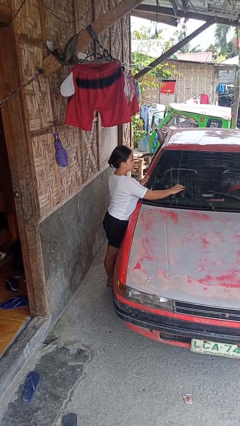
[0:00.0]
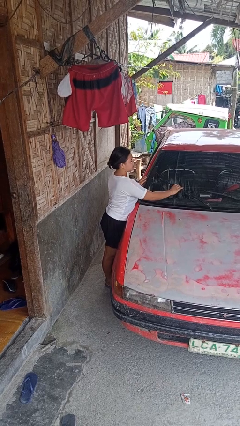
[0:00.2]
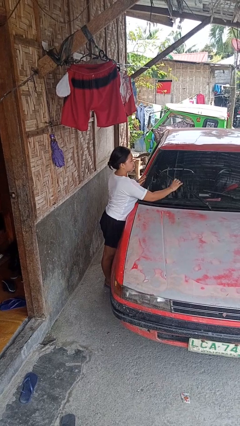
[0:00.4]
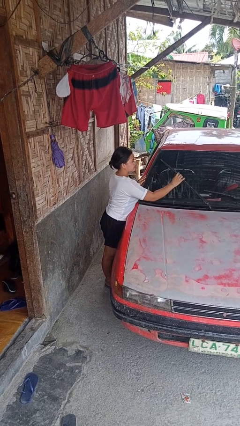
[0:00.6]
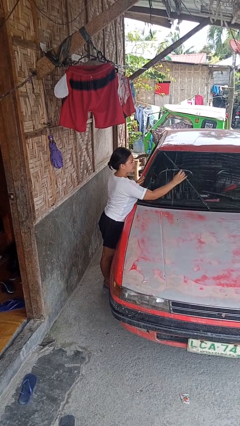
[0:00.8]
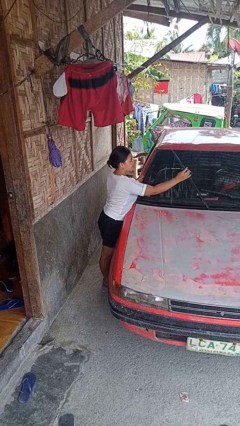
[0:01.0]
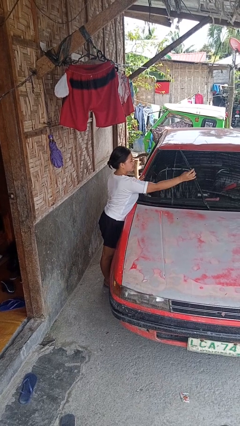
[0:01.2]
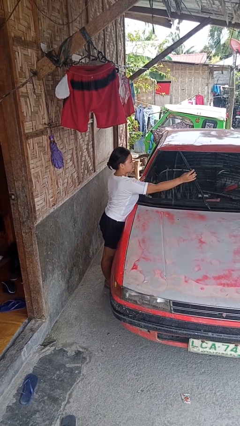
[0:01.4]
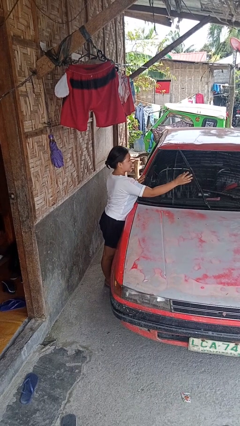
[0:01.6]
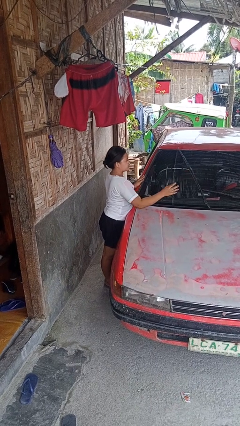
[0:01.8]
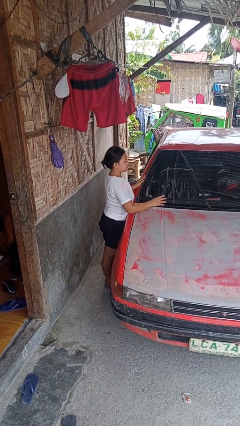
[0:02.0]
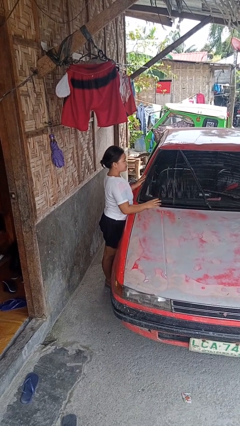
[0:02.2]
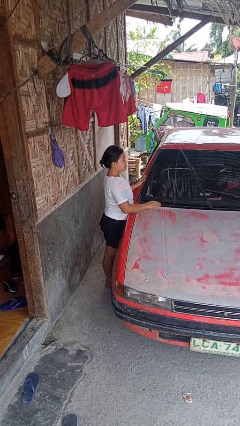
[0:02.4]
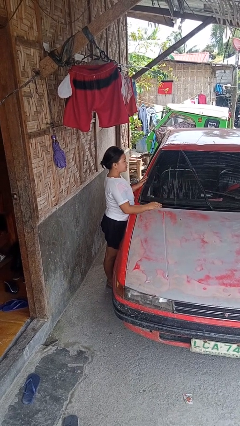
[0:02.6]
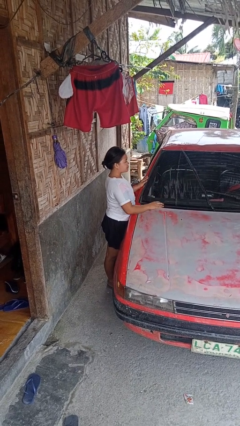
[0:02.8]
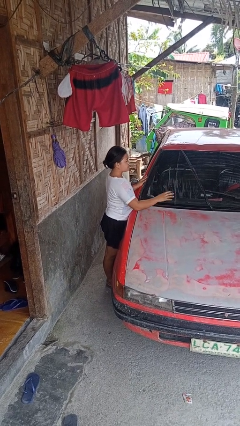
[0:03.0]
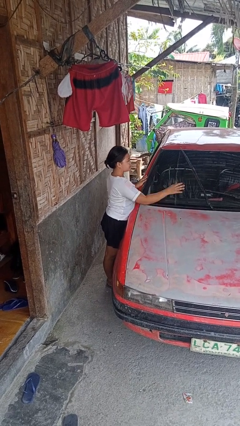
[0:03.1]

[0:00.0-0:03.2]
person flips up car wipers

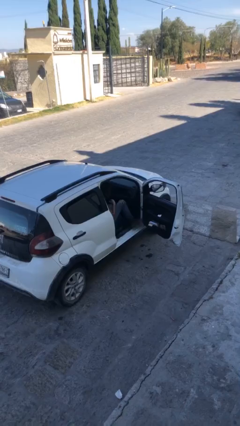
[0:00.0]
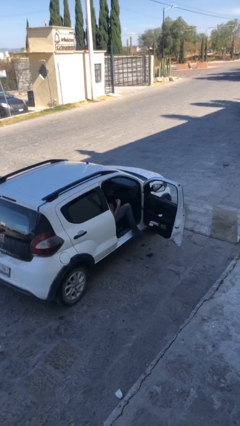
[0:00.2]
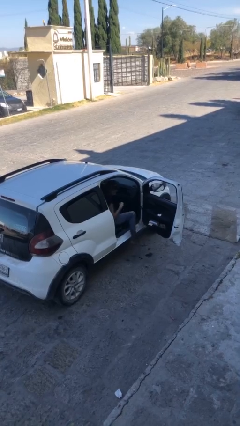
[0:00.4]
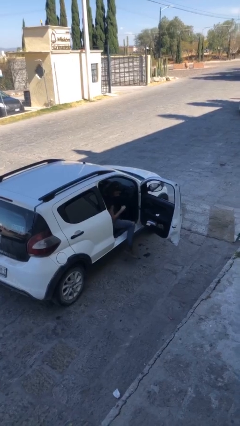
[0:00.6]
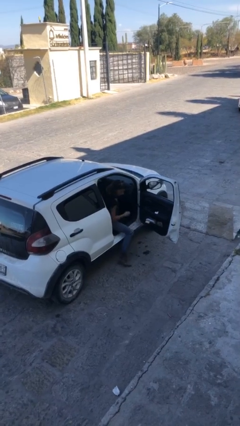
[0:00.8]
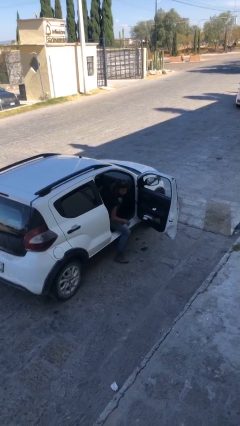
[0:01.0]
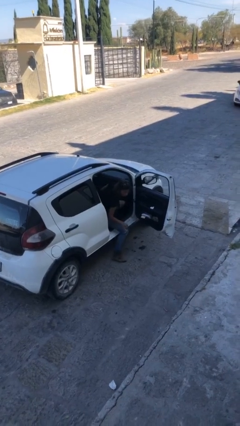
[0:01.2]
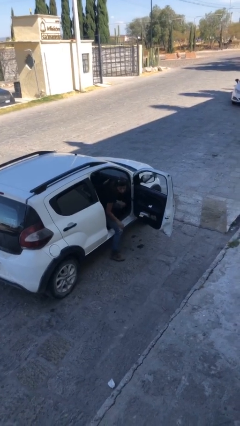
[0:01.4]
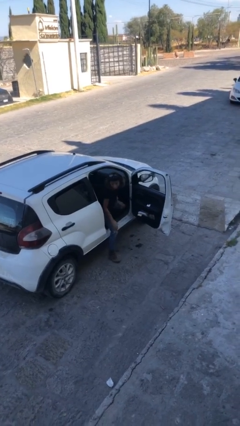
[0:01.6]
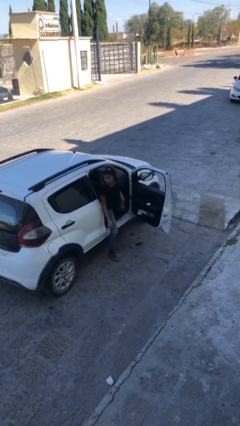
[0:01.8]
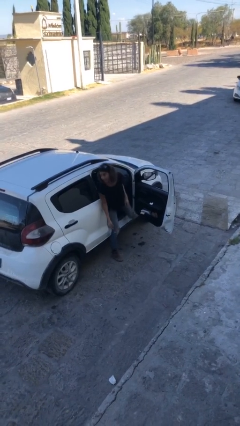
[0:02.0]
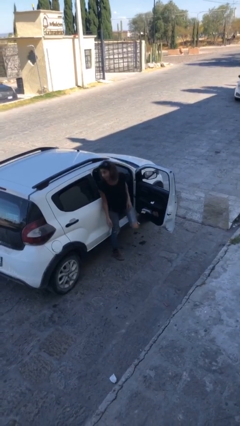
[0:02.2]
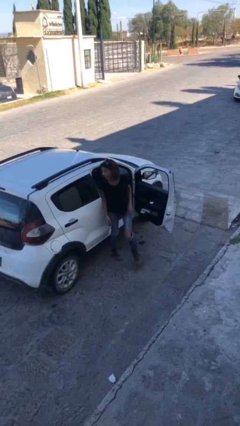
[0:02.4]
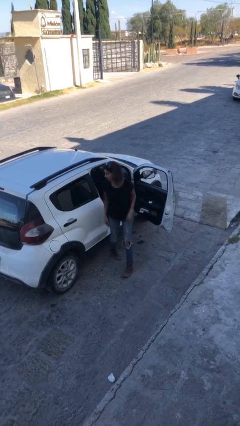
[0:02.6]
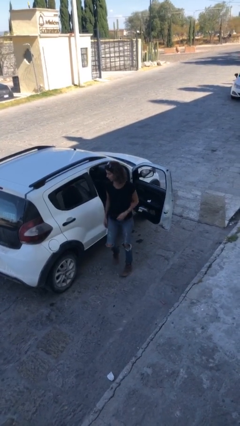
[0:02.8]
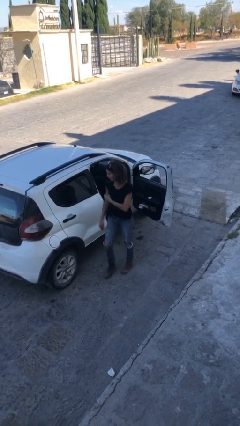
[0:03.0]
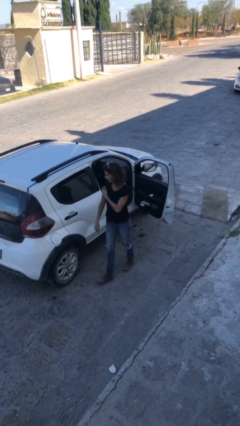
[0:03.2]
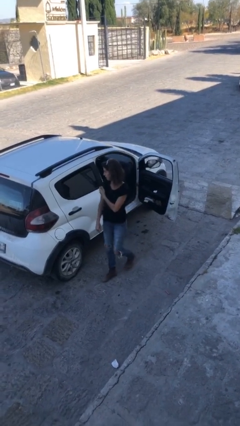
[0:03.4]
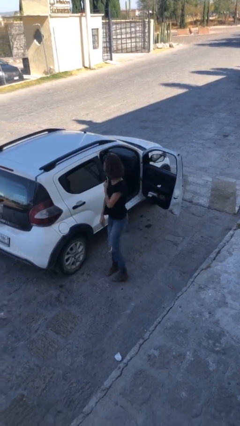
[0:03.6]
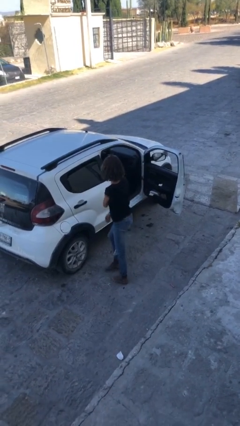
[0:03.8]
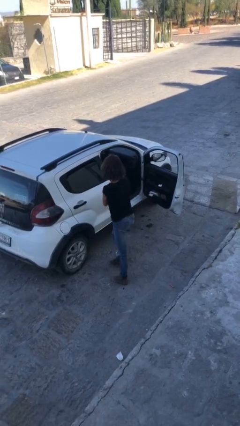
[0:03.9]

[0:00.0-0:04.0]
person exits car

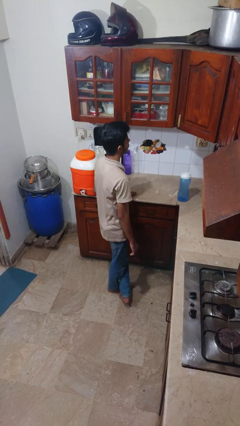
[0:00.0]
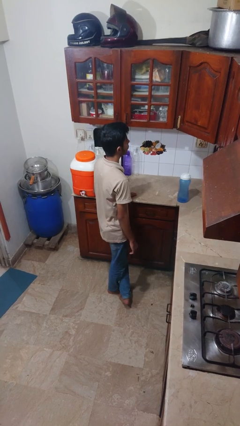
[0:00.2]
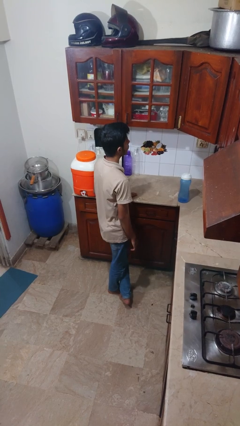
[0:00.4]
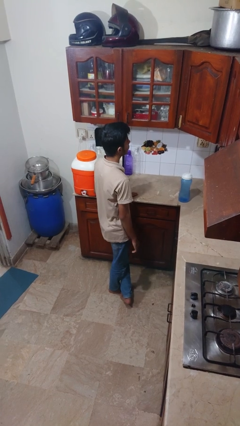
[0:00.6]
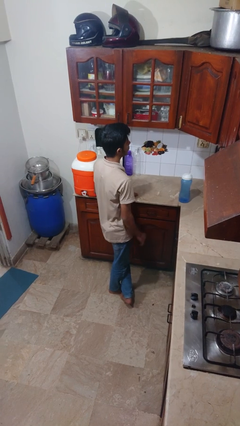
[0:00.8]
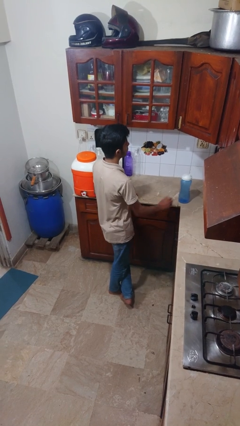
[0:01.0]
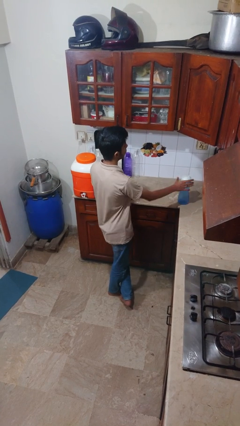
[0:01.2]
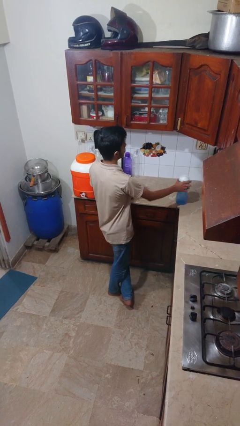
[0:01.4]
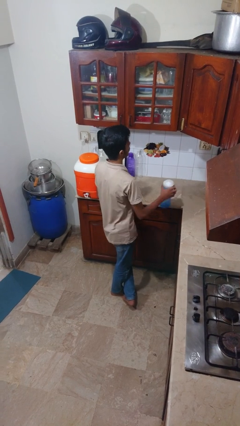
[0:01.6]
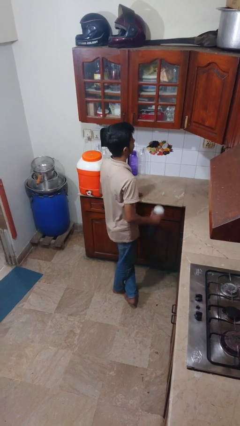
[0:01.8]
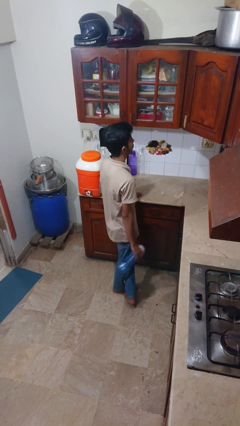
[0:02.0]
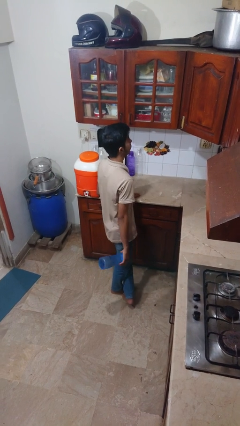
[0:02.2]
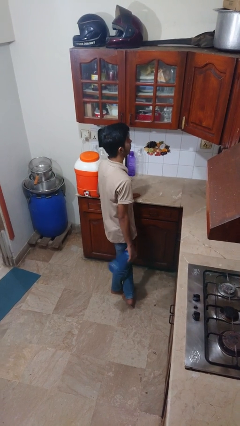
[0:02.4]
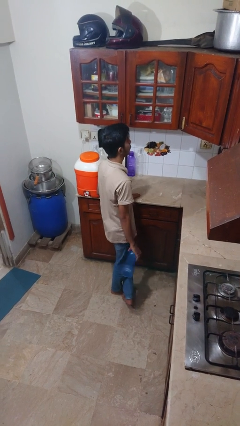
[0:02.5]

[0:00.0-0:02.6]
person picks up object from countertop

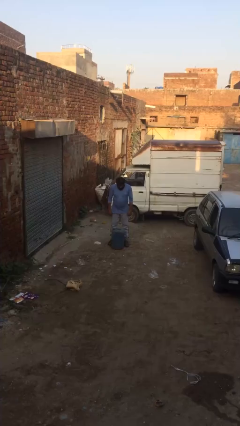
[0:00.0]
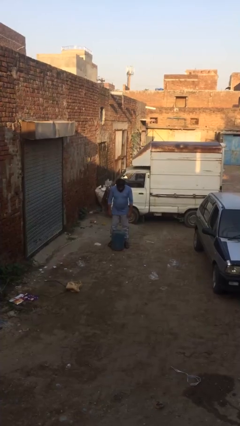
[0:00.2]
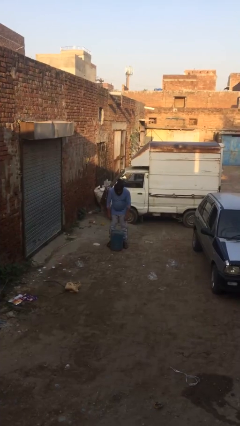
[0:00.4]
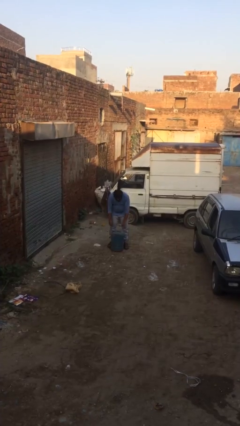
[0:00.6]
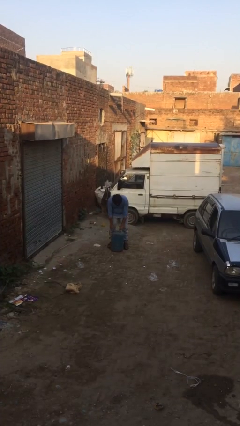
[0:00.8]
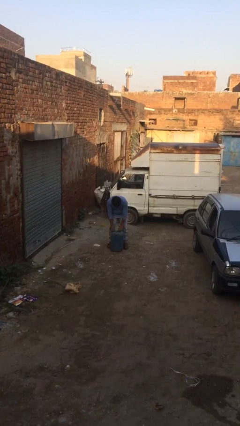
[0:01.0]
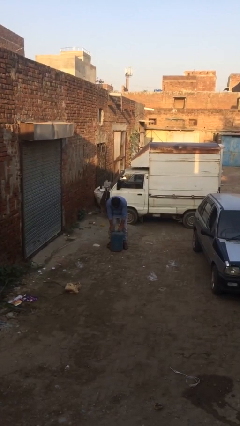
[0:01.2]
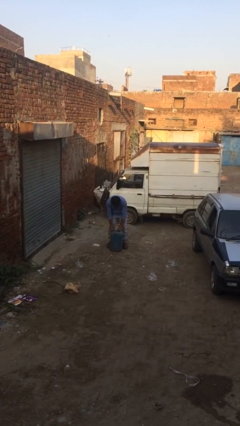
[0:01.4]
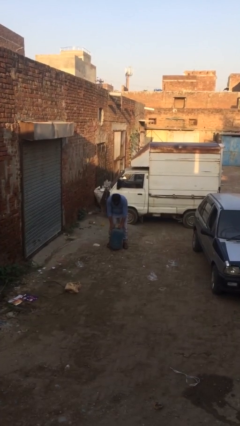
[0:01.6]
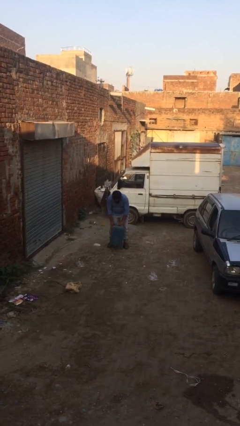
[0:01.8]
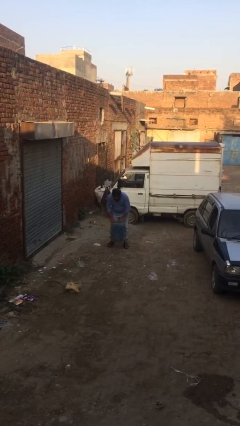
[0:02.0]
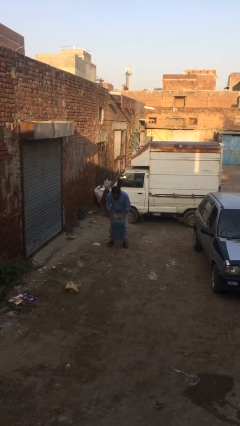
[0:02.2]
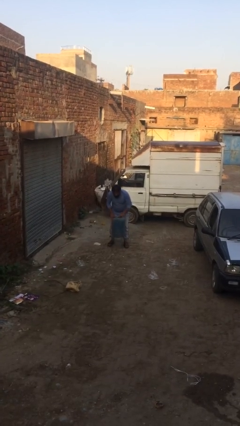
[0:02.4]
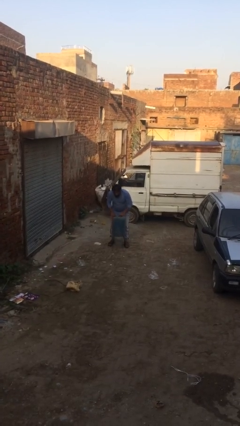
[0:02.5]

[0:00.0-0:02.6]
person picks up object from floor

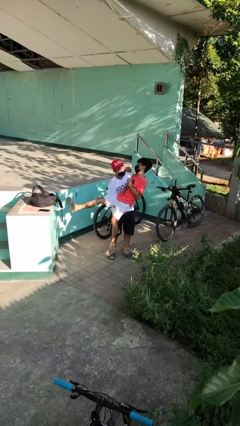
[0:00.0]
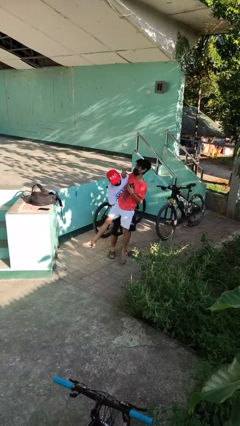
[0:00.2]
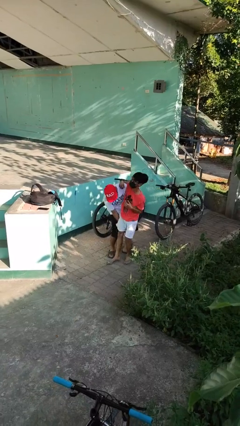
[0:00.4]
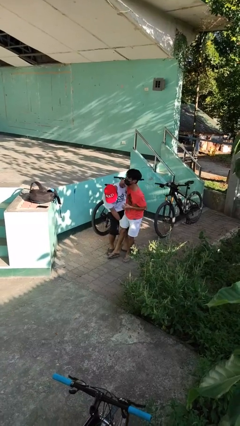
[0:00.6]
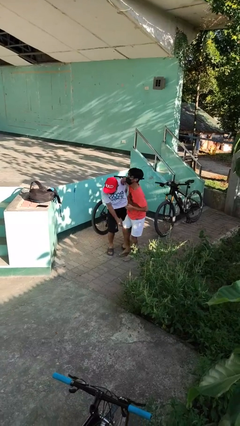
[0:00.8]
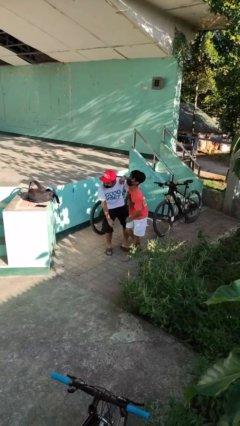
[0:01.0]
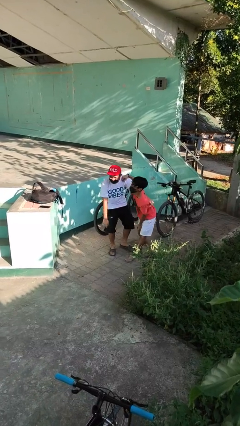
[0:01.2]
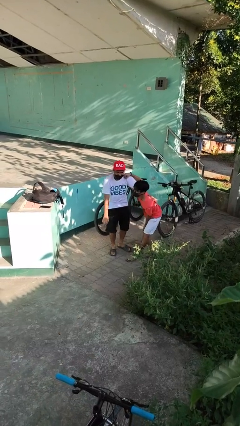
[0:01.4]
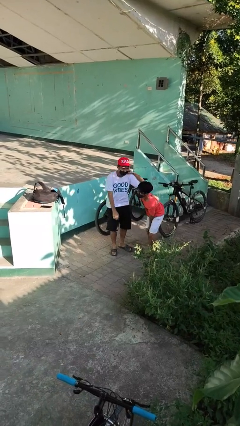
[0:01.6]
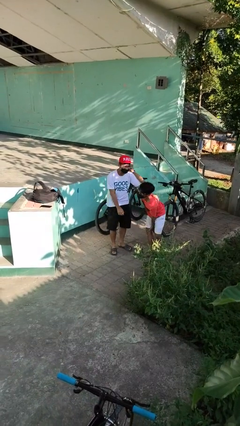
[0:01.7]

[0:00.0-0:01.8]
person puts down person

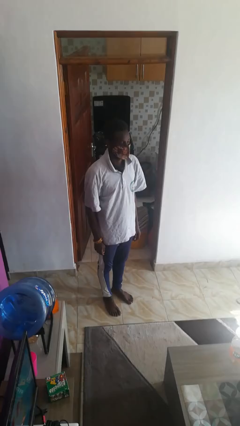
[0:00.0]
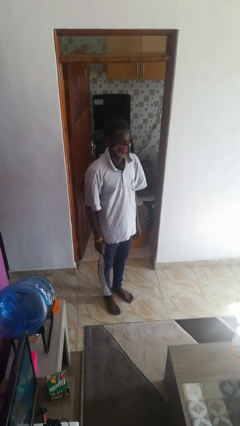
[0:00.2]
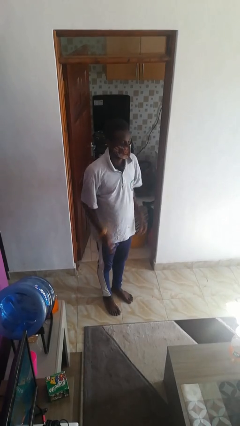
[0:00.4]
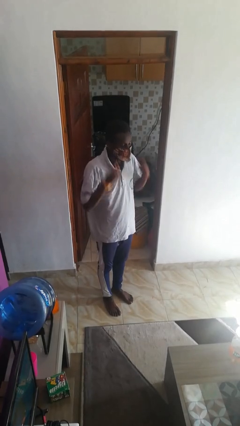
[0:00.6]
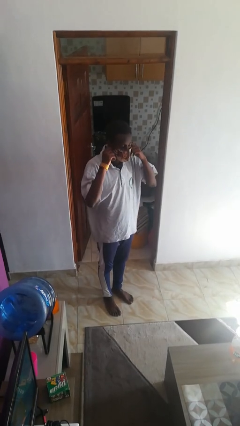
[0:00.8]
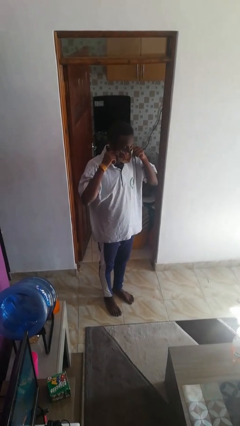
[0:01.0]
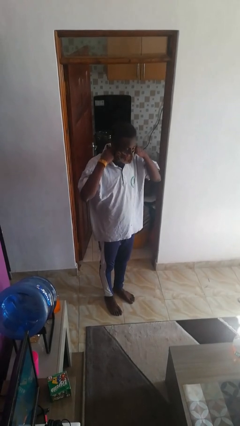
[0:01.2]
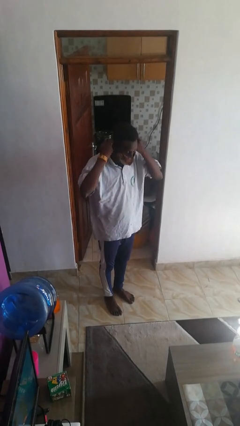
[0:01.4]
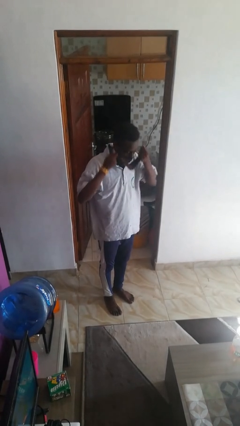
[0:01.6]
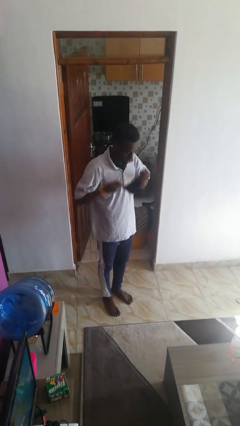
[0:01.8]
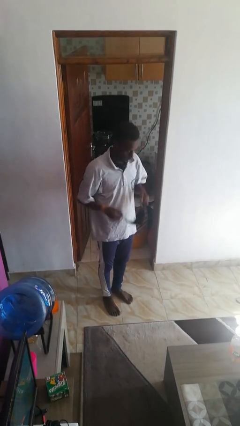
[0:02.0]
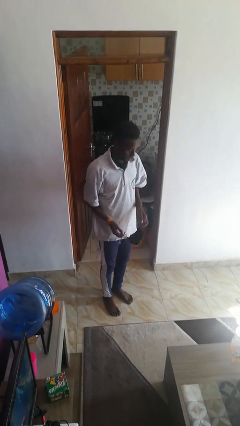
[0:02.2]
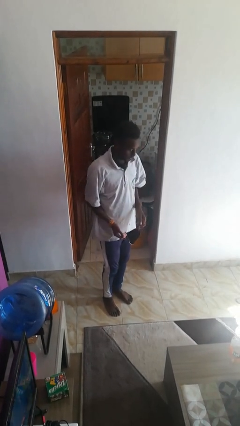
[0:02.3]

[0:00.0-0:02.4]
person takes off facemask

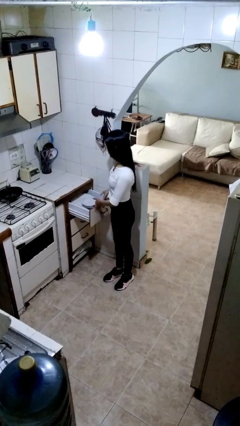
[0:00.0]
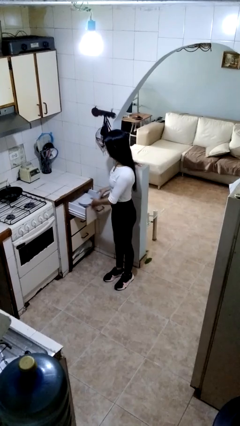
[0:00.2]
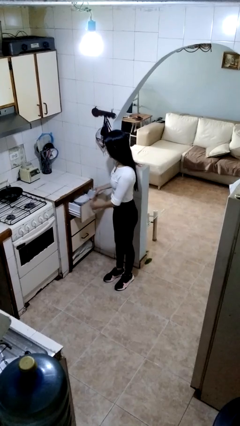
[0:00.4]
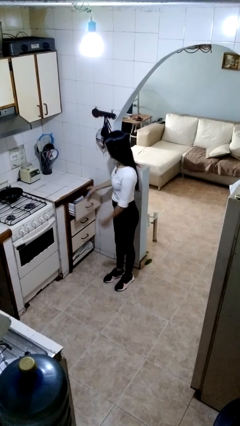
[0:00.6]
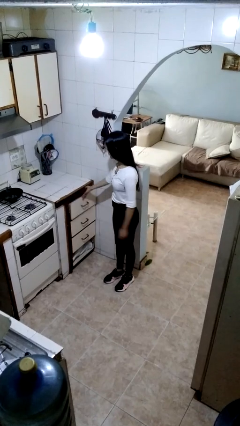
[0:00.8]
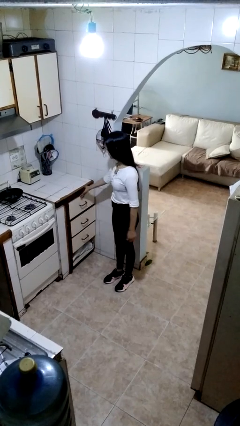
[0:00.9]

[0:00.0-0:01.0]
person closes kitchen drawer
